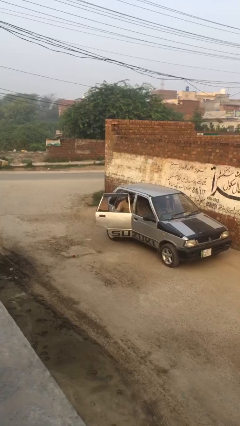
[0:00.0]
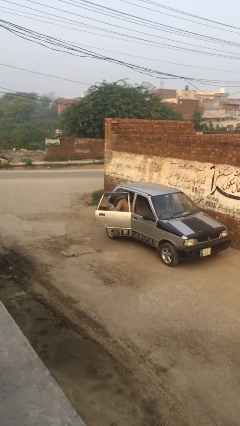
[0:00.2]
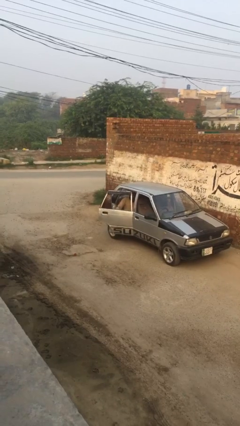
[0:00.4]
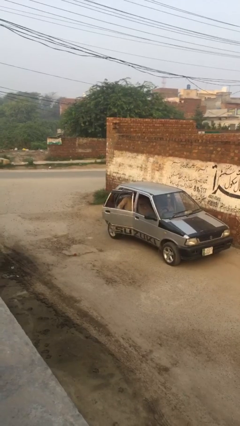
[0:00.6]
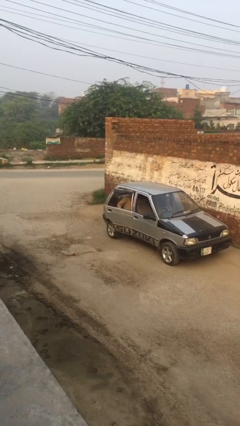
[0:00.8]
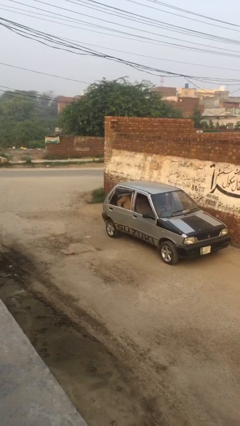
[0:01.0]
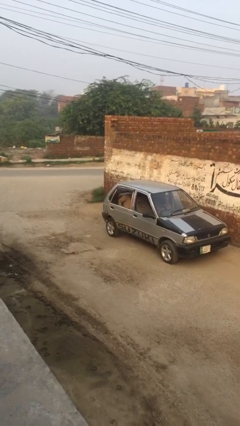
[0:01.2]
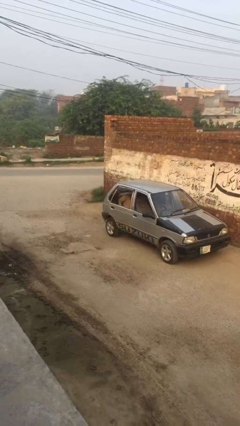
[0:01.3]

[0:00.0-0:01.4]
person closes car door

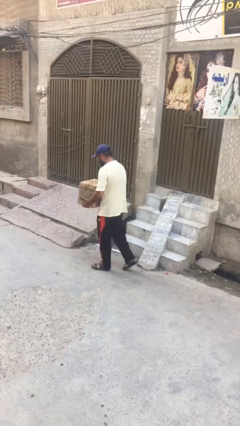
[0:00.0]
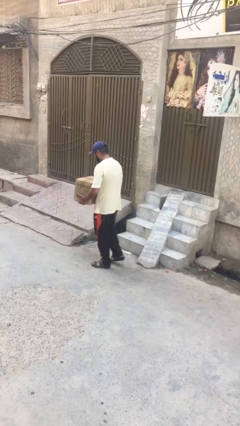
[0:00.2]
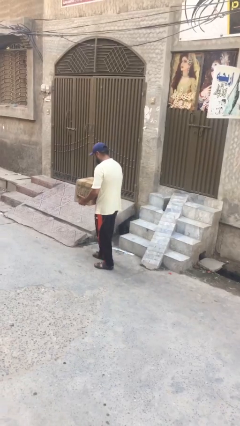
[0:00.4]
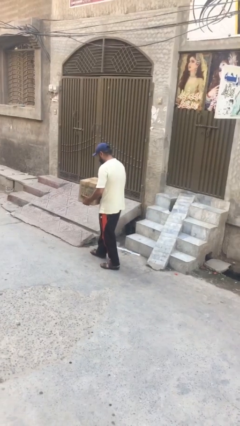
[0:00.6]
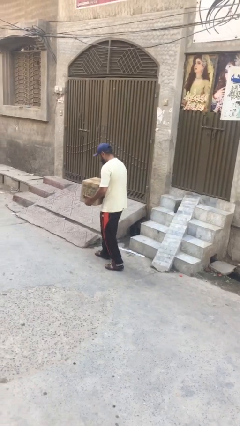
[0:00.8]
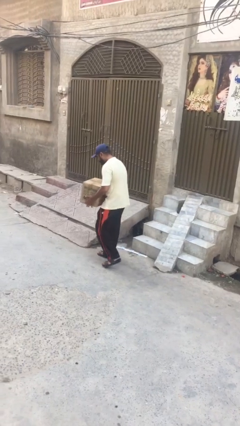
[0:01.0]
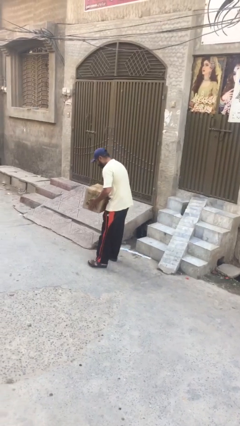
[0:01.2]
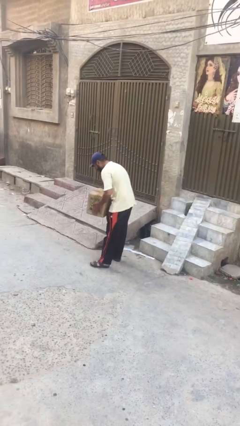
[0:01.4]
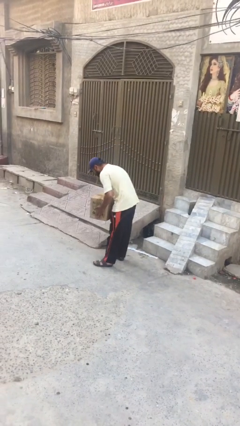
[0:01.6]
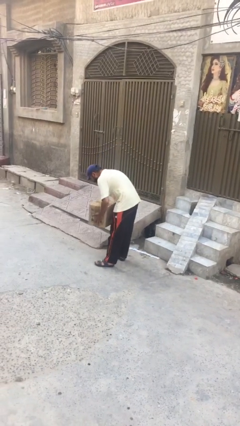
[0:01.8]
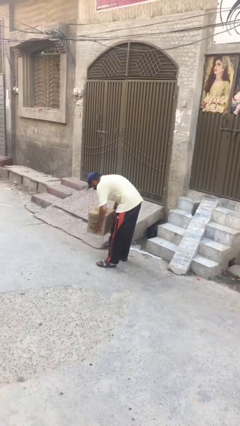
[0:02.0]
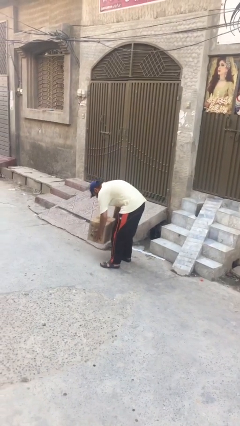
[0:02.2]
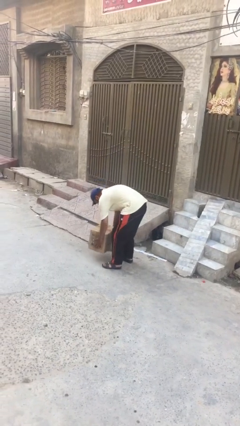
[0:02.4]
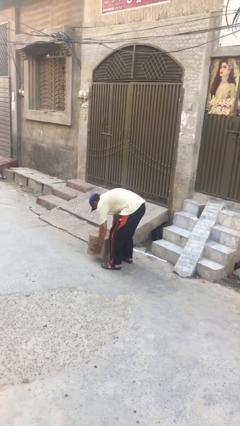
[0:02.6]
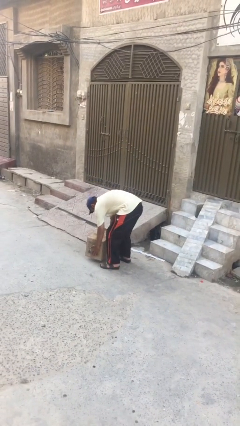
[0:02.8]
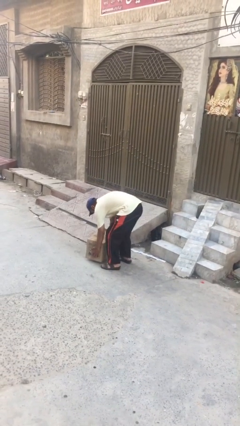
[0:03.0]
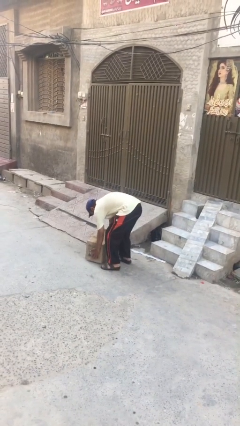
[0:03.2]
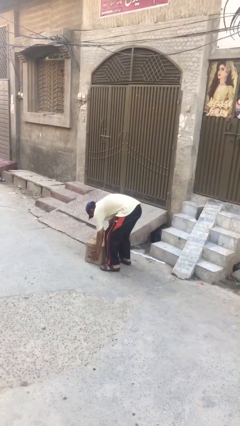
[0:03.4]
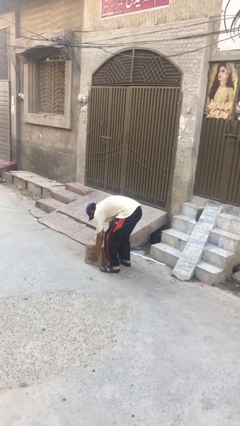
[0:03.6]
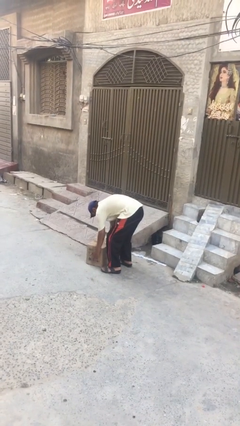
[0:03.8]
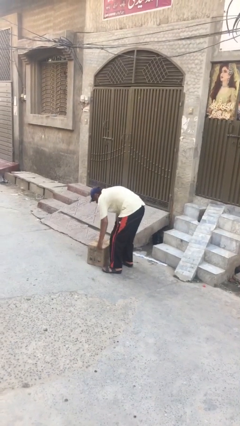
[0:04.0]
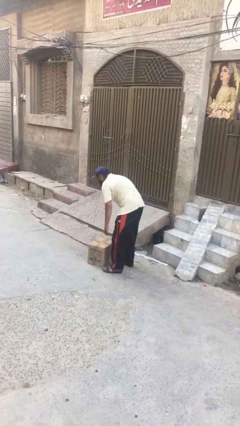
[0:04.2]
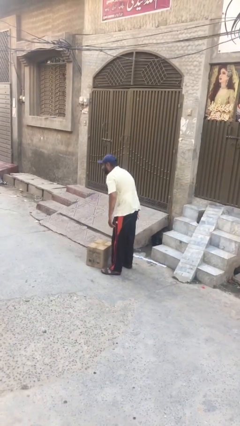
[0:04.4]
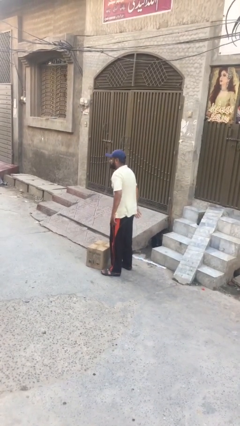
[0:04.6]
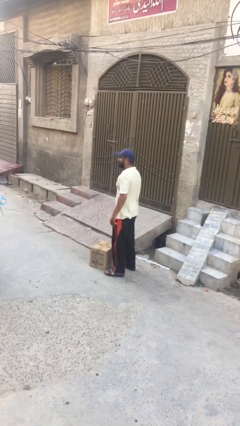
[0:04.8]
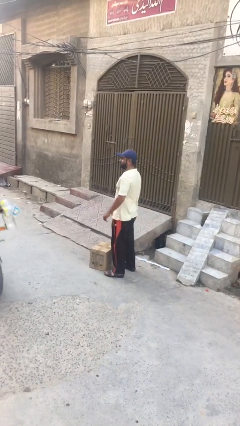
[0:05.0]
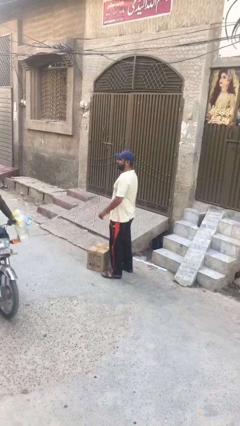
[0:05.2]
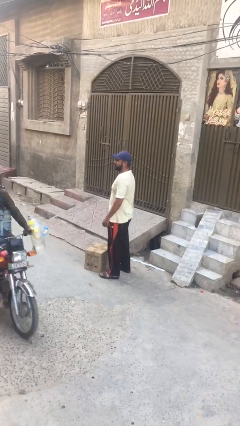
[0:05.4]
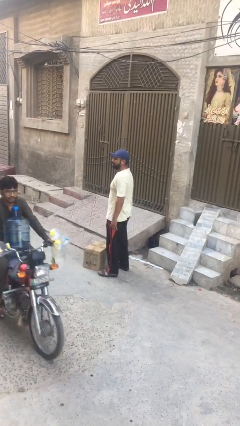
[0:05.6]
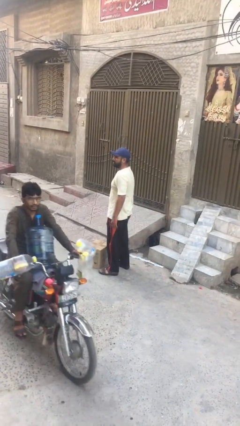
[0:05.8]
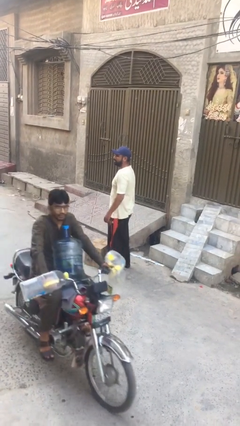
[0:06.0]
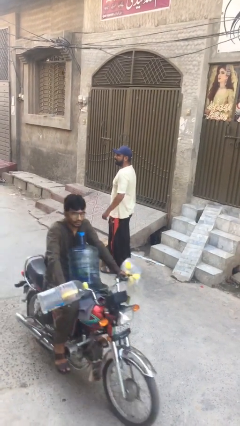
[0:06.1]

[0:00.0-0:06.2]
person puts down object on floor

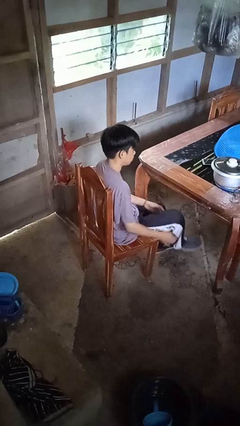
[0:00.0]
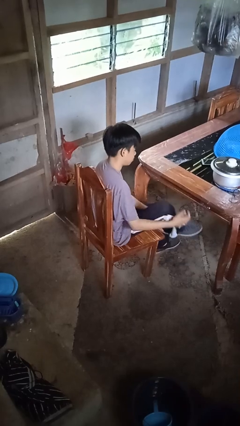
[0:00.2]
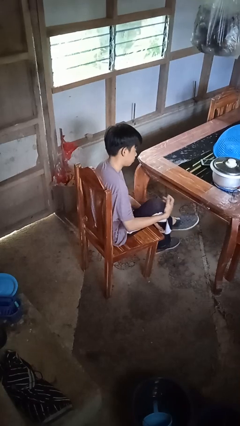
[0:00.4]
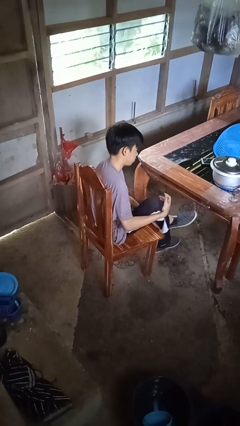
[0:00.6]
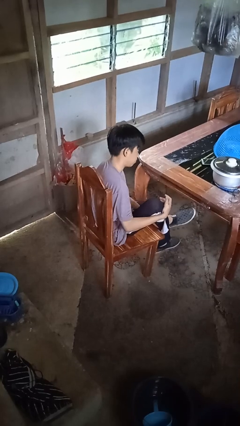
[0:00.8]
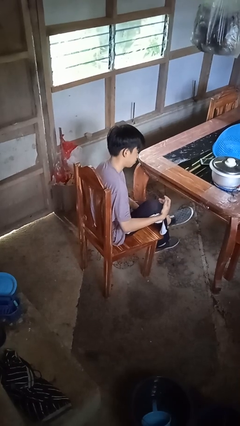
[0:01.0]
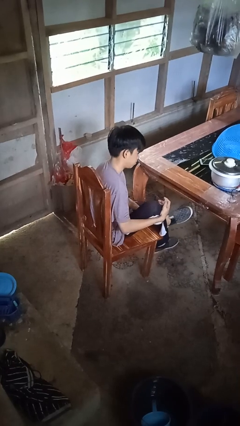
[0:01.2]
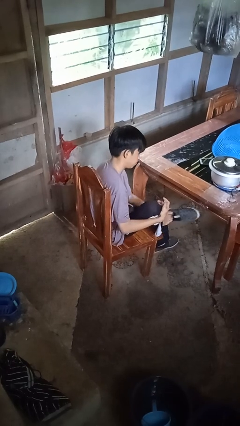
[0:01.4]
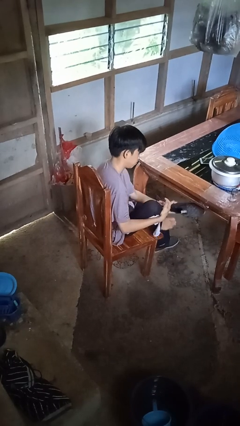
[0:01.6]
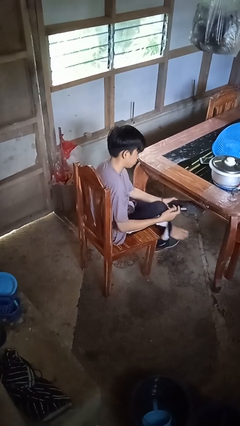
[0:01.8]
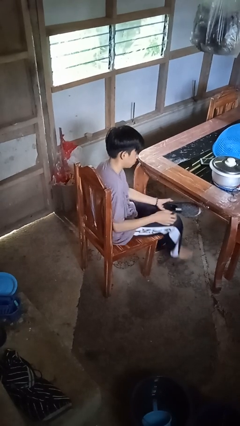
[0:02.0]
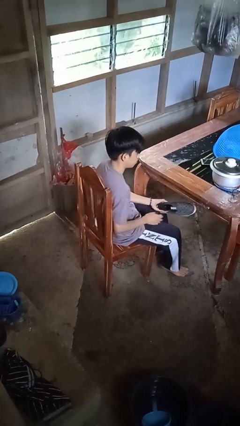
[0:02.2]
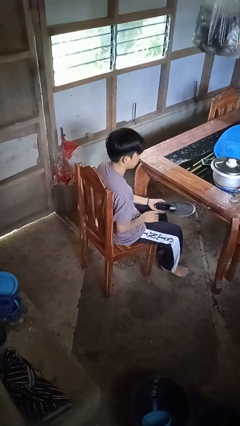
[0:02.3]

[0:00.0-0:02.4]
person takes off shoes

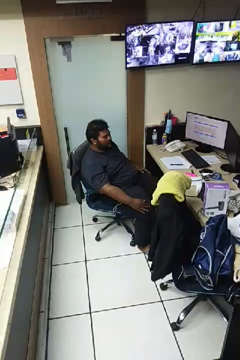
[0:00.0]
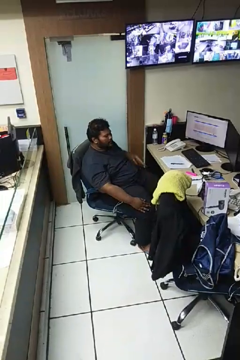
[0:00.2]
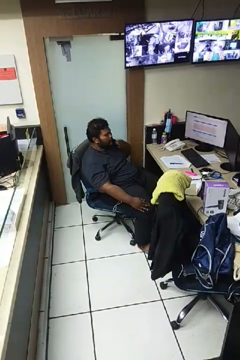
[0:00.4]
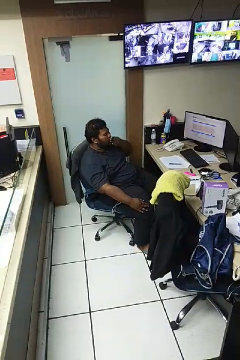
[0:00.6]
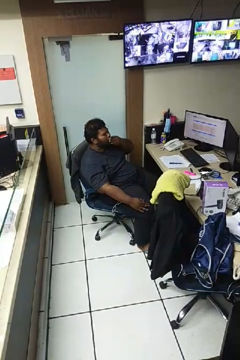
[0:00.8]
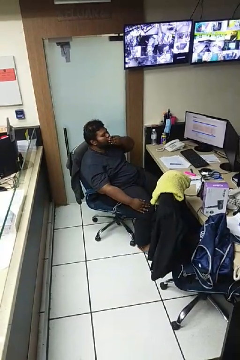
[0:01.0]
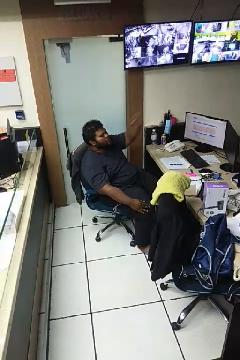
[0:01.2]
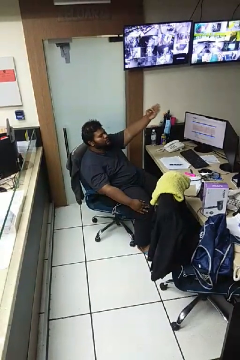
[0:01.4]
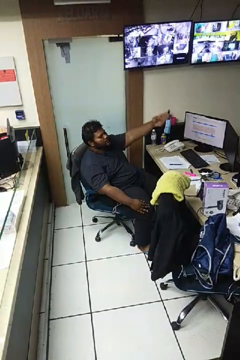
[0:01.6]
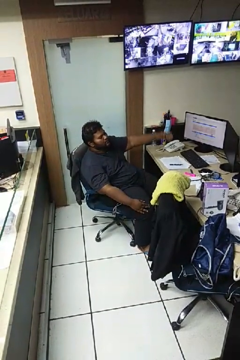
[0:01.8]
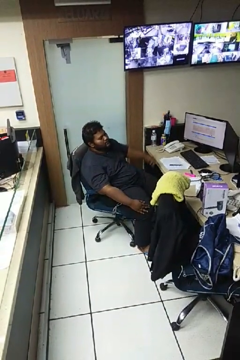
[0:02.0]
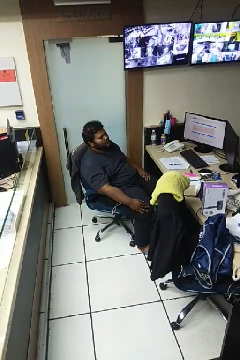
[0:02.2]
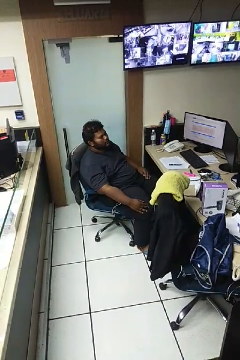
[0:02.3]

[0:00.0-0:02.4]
person gestures blow kiss

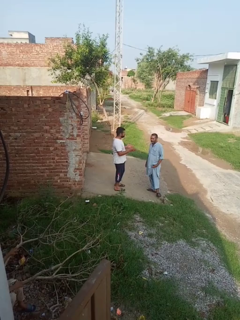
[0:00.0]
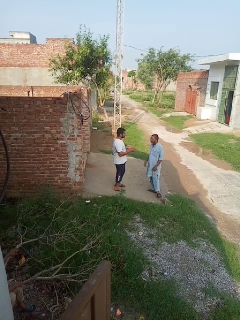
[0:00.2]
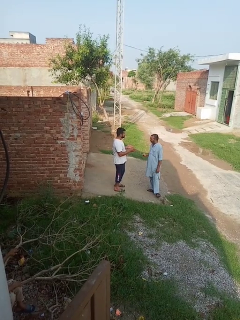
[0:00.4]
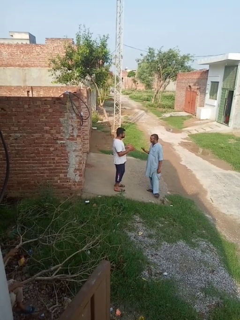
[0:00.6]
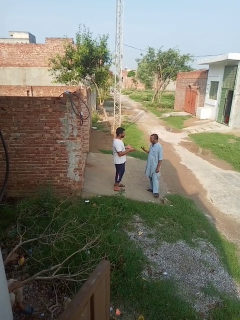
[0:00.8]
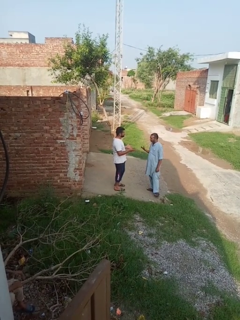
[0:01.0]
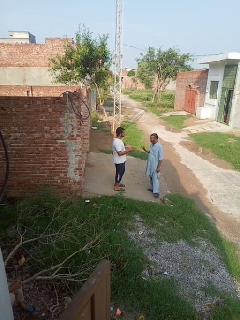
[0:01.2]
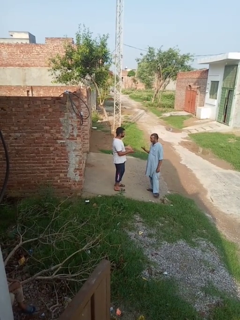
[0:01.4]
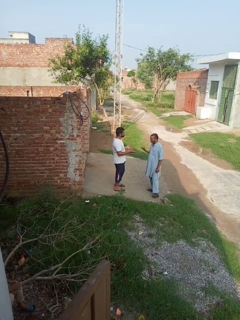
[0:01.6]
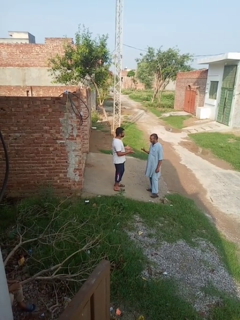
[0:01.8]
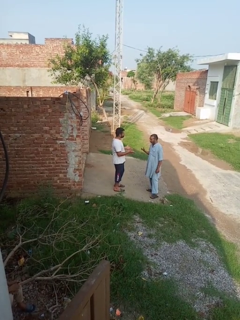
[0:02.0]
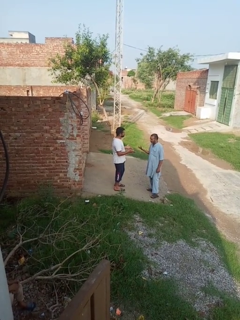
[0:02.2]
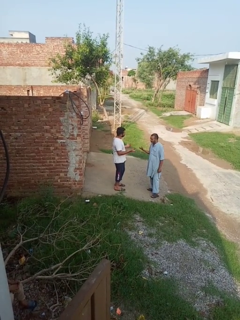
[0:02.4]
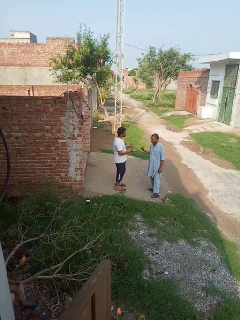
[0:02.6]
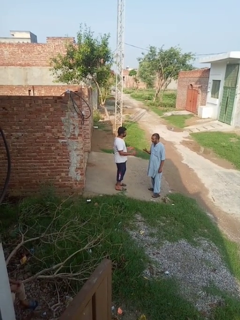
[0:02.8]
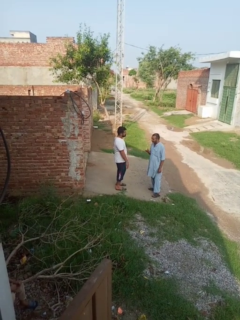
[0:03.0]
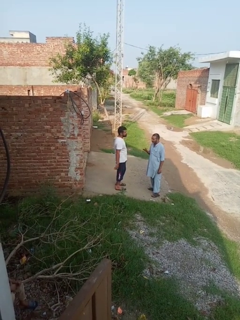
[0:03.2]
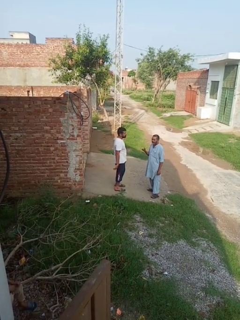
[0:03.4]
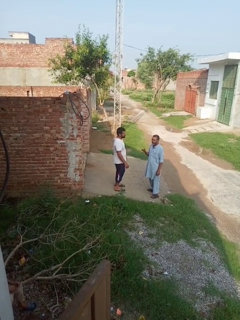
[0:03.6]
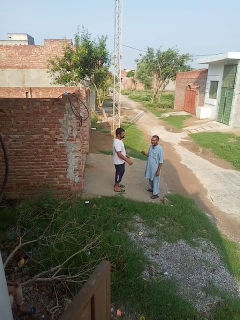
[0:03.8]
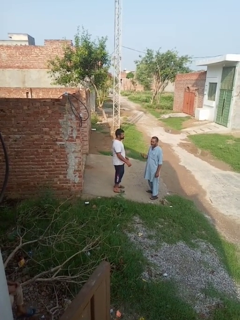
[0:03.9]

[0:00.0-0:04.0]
person talks to person

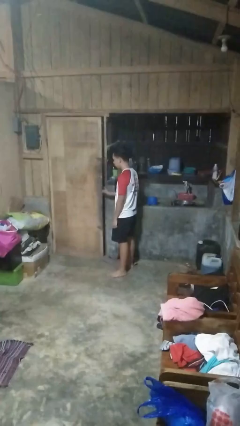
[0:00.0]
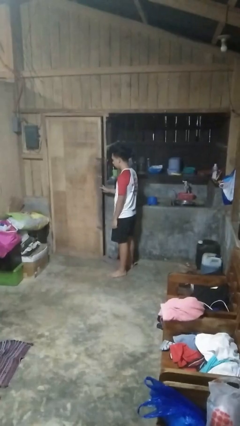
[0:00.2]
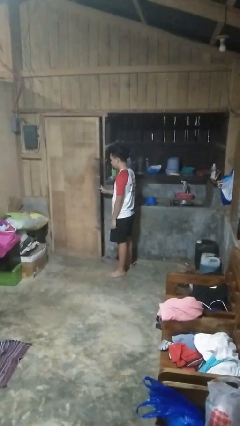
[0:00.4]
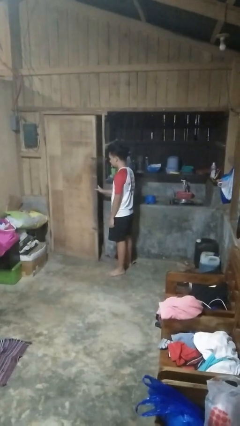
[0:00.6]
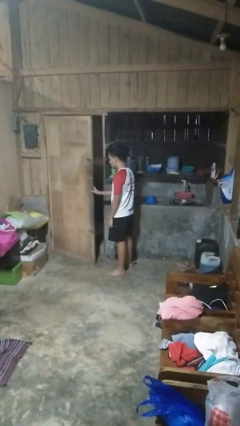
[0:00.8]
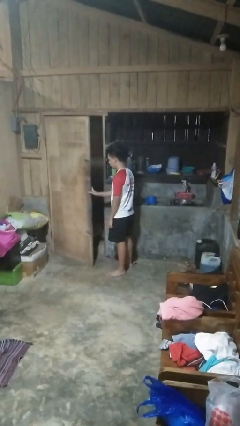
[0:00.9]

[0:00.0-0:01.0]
person opens facility door

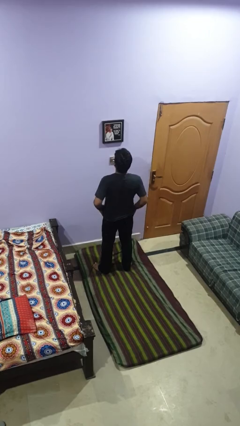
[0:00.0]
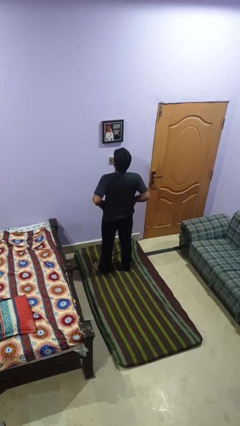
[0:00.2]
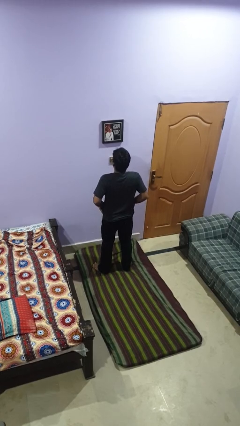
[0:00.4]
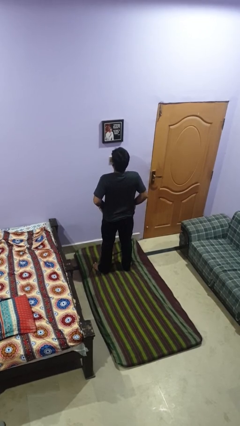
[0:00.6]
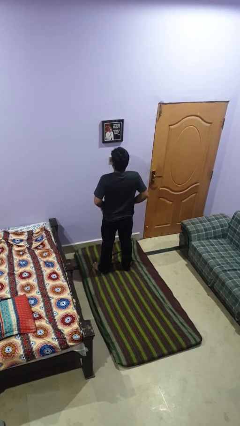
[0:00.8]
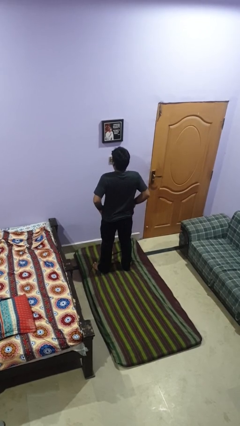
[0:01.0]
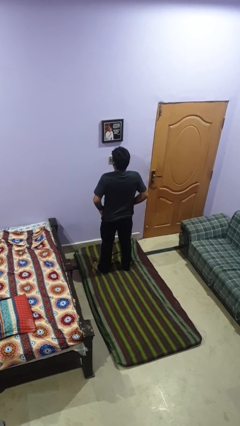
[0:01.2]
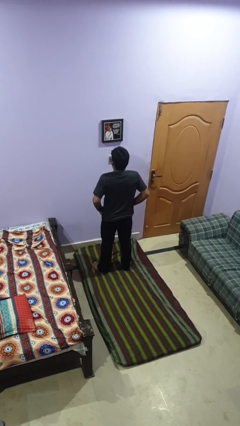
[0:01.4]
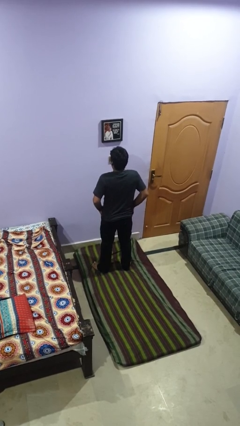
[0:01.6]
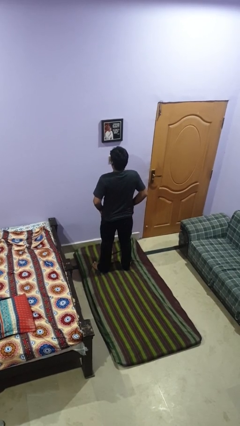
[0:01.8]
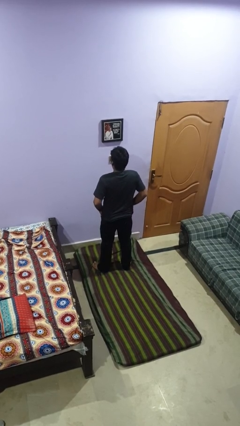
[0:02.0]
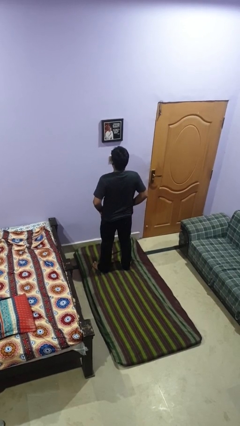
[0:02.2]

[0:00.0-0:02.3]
person puts hands in back pockets
